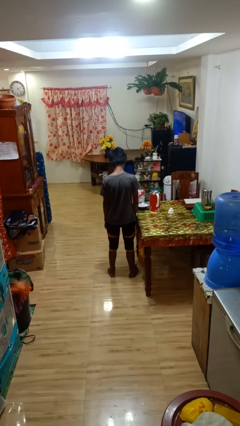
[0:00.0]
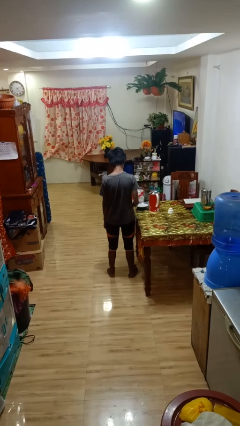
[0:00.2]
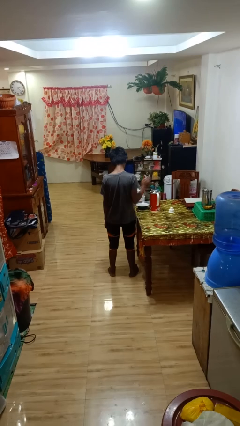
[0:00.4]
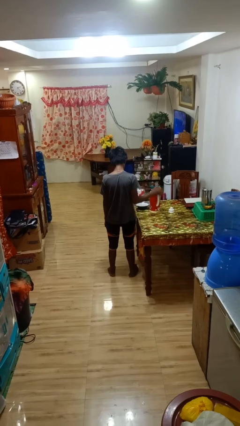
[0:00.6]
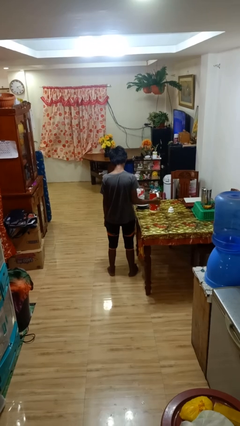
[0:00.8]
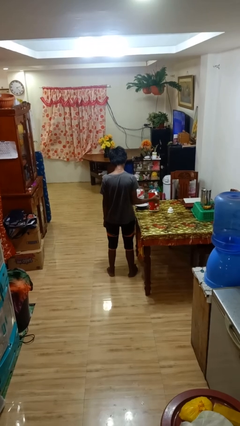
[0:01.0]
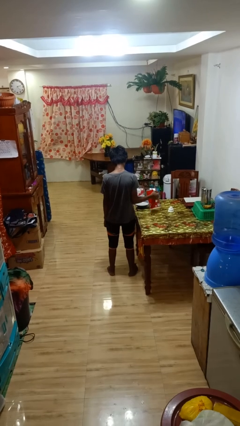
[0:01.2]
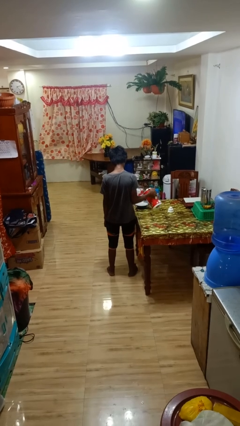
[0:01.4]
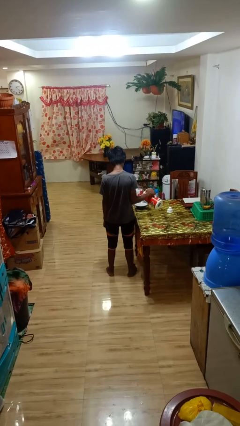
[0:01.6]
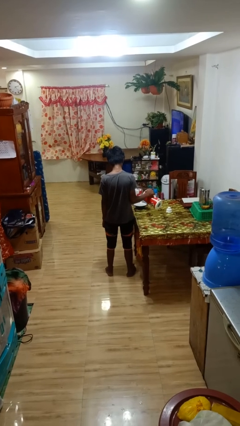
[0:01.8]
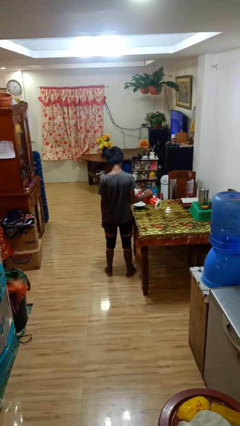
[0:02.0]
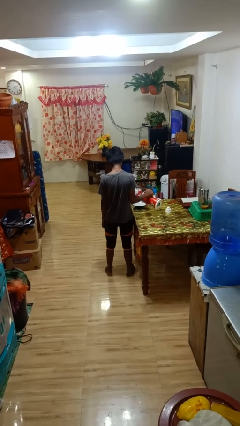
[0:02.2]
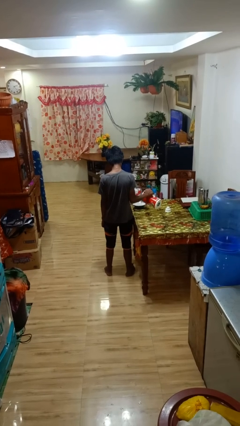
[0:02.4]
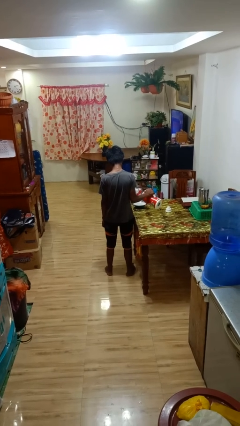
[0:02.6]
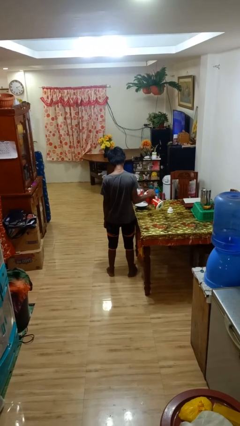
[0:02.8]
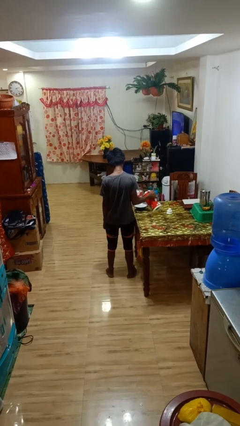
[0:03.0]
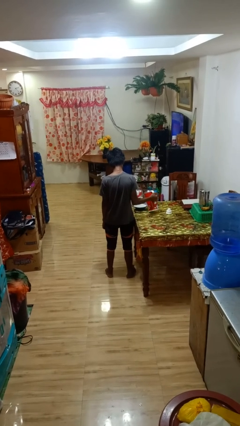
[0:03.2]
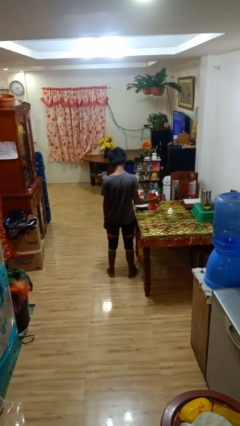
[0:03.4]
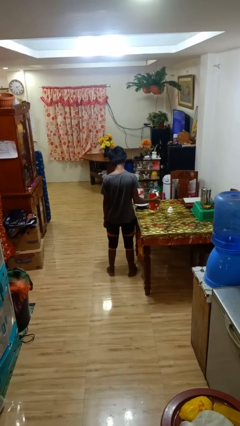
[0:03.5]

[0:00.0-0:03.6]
person pours into bowl

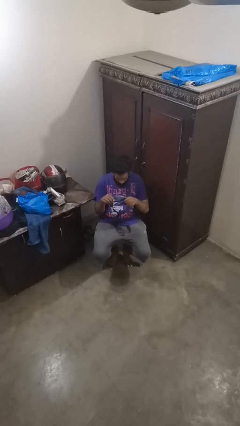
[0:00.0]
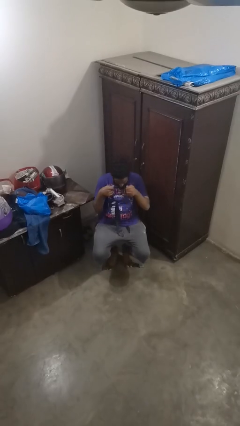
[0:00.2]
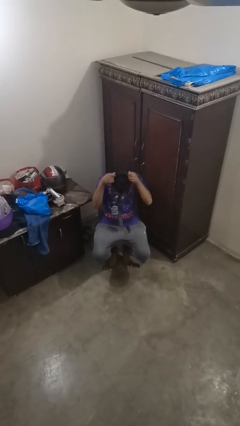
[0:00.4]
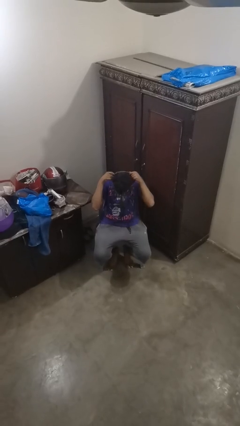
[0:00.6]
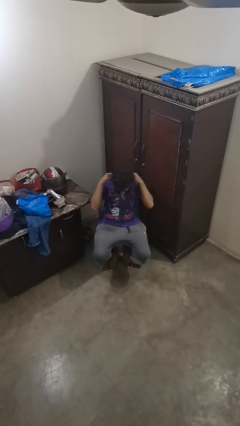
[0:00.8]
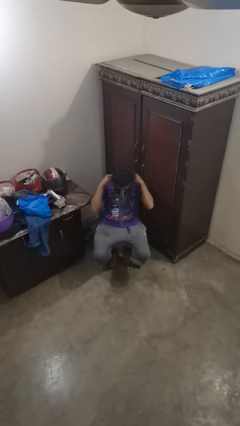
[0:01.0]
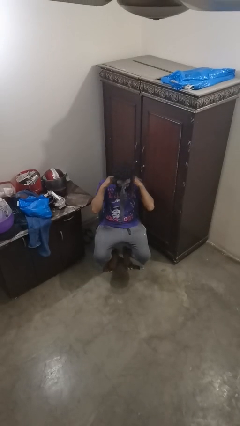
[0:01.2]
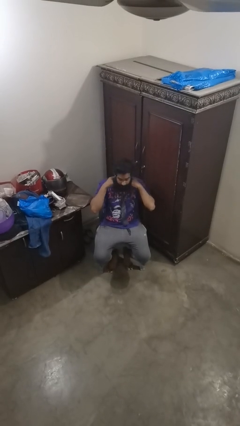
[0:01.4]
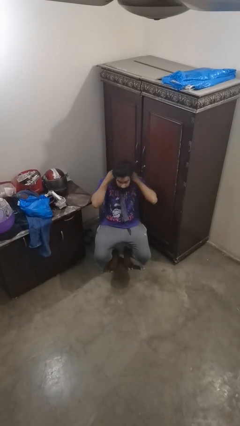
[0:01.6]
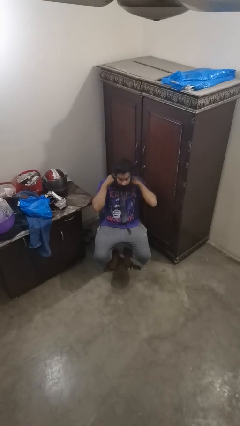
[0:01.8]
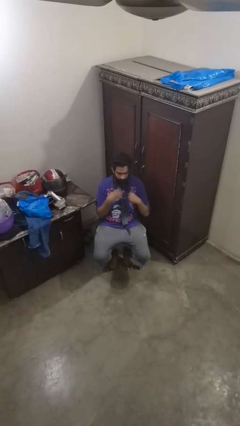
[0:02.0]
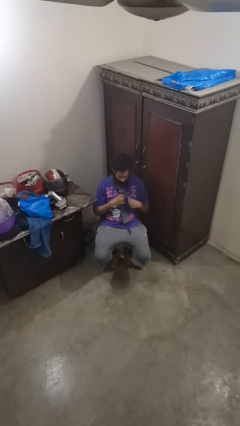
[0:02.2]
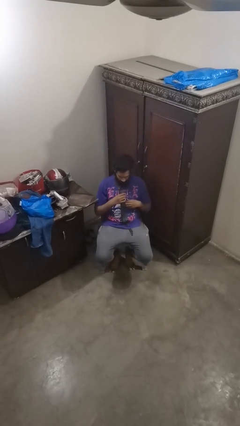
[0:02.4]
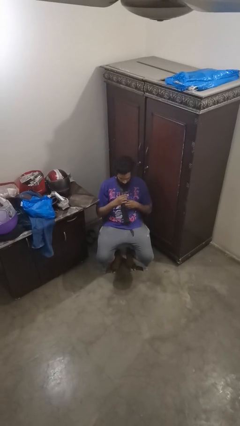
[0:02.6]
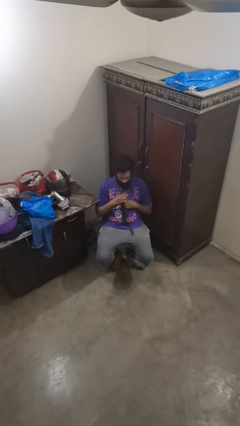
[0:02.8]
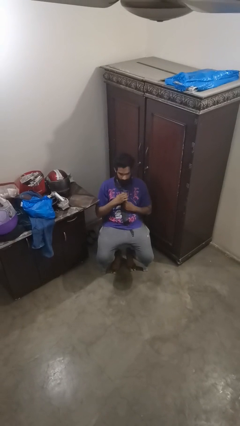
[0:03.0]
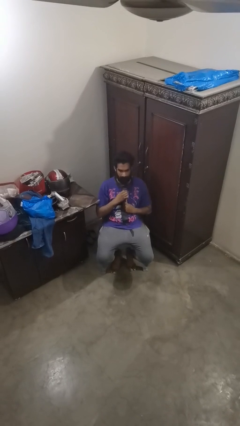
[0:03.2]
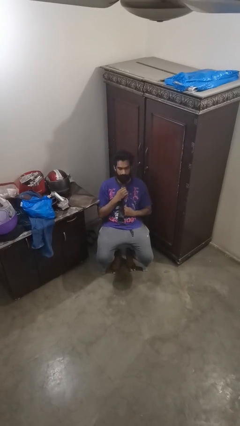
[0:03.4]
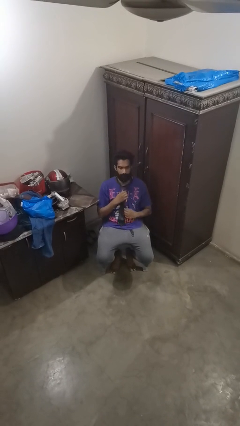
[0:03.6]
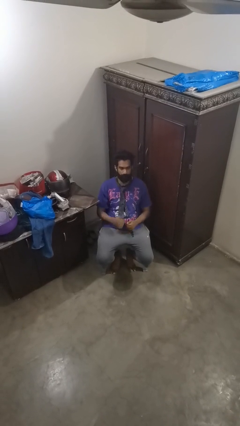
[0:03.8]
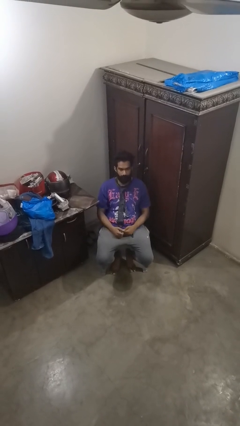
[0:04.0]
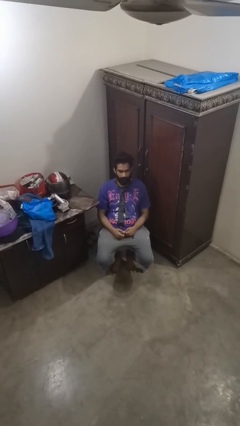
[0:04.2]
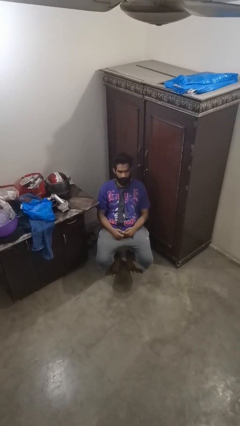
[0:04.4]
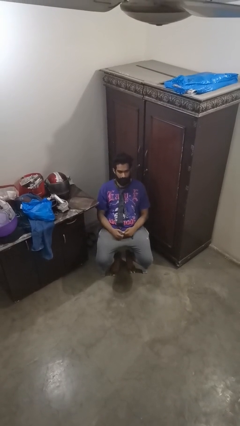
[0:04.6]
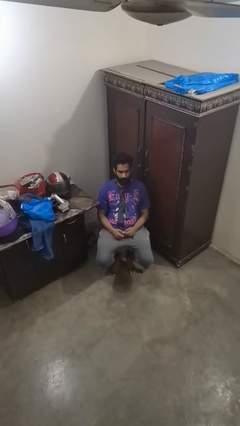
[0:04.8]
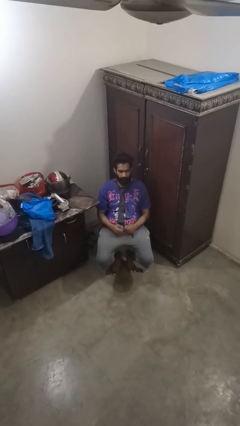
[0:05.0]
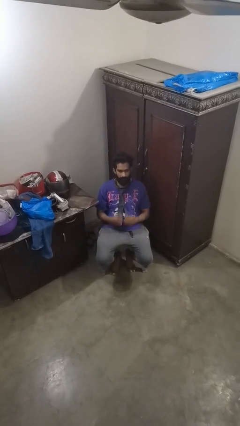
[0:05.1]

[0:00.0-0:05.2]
person puts on necktie

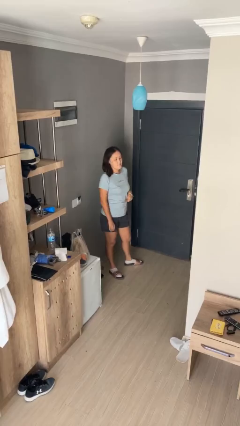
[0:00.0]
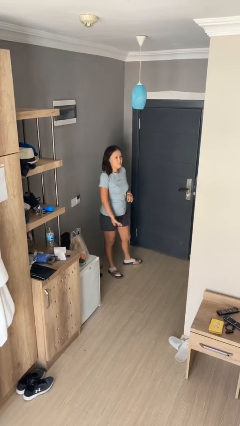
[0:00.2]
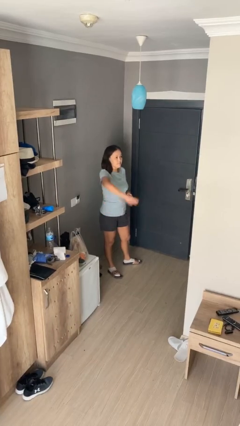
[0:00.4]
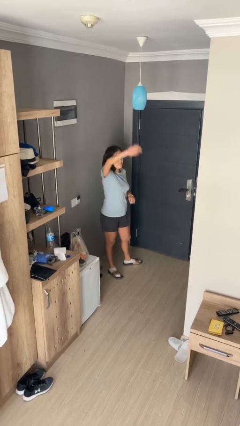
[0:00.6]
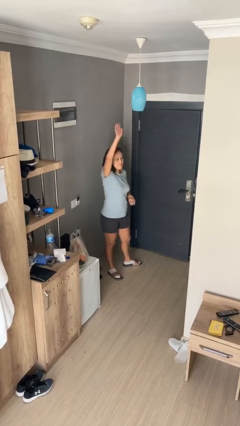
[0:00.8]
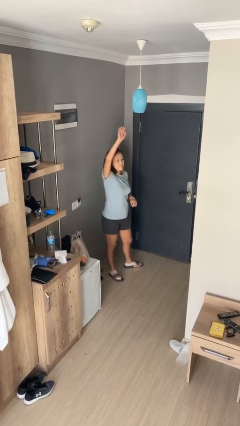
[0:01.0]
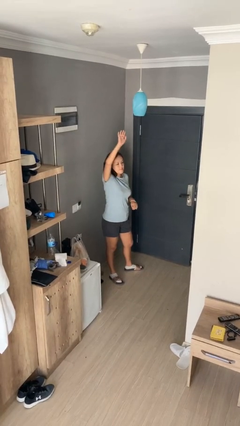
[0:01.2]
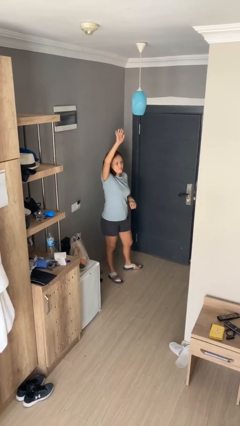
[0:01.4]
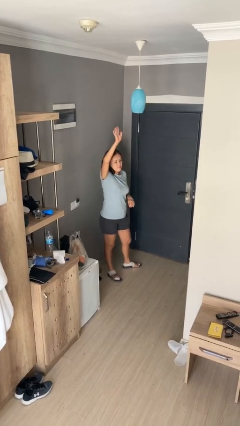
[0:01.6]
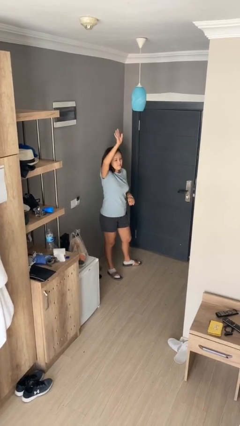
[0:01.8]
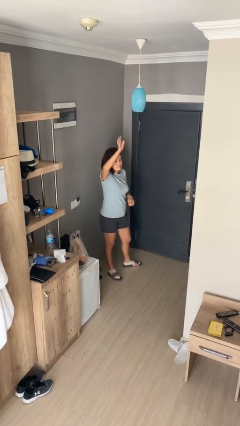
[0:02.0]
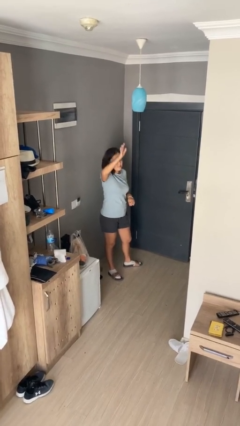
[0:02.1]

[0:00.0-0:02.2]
person gestures swipe up

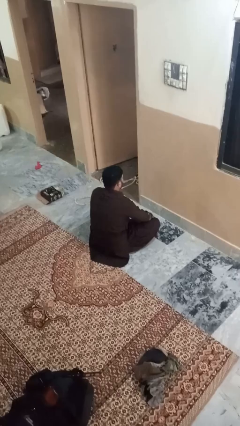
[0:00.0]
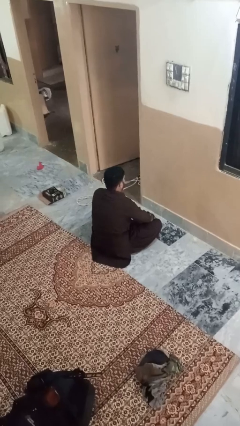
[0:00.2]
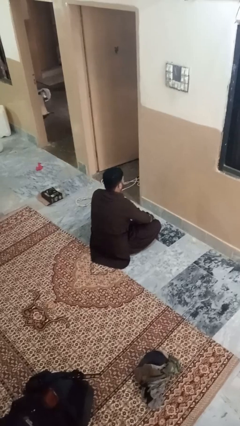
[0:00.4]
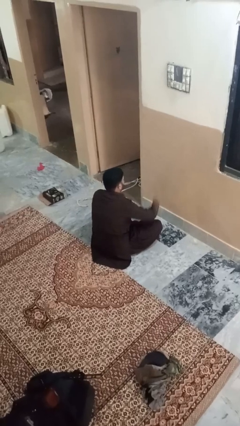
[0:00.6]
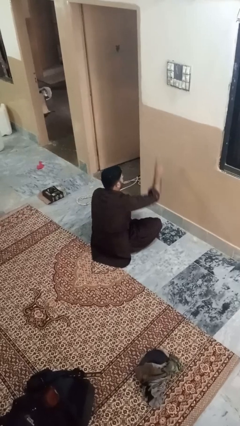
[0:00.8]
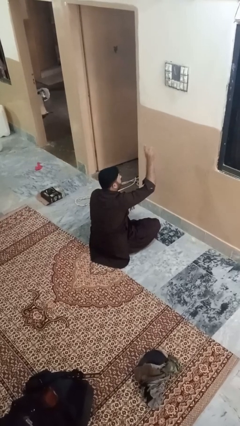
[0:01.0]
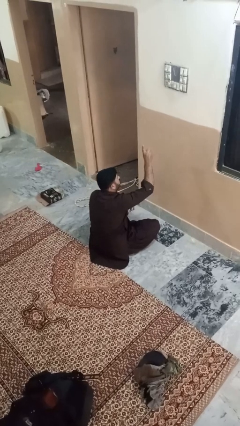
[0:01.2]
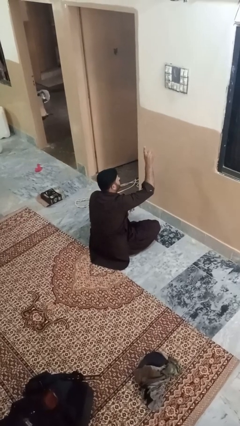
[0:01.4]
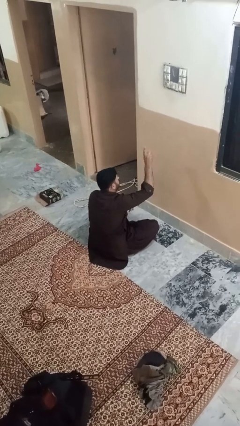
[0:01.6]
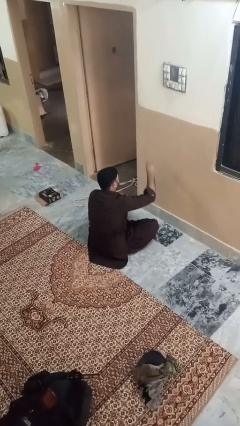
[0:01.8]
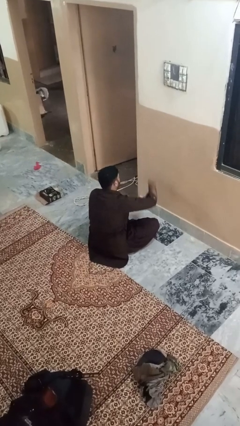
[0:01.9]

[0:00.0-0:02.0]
person gestures number one

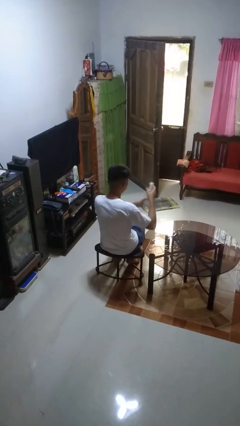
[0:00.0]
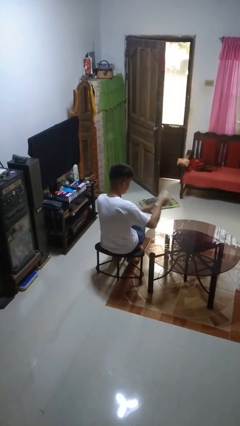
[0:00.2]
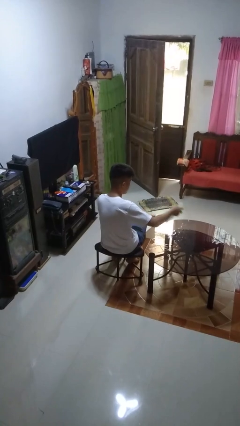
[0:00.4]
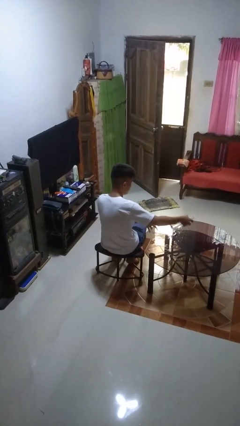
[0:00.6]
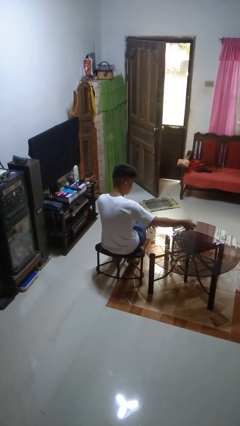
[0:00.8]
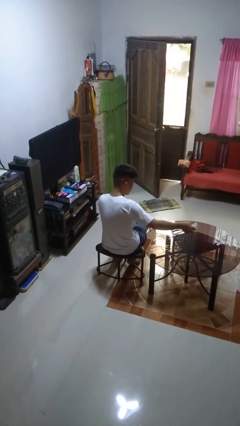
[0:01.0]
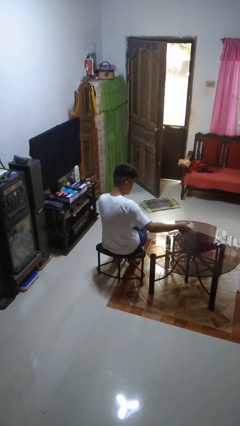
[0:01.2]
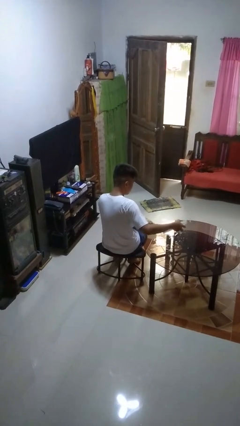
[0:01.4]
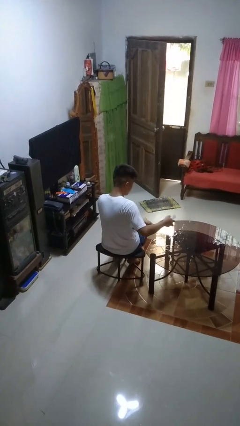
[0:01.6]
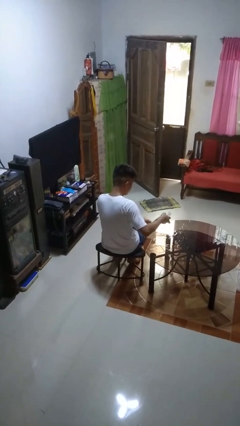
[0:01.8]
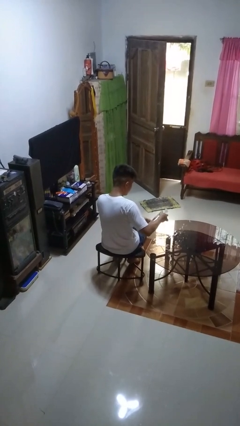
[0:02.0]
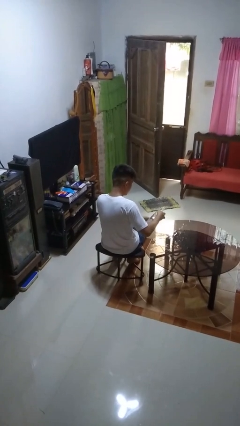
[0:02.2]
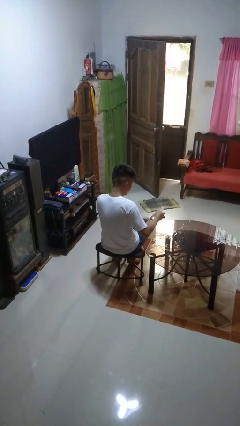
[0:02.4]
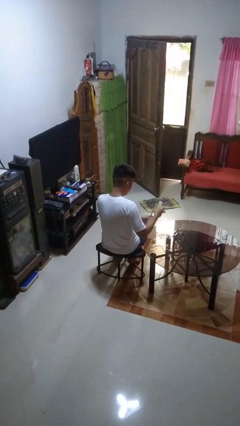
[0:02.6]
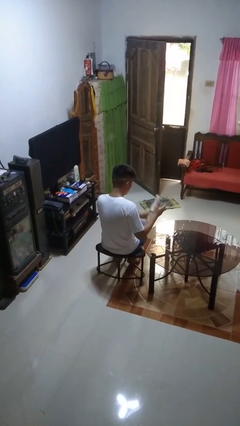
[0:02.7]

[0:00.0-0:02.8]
person sprays from bottle

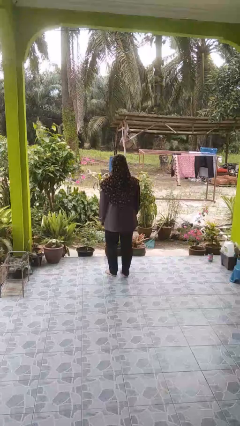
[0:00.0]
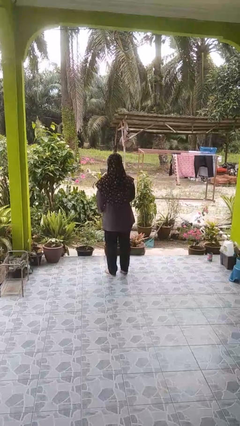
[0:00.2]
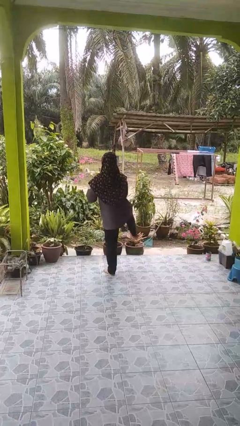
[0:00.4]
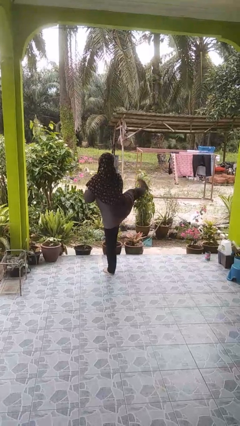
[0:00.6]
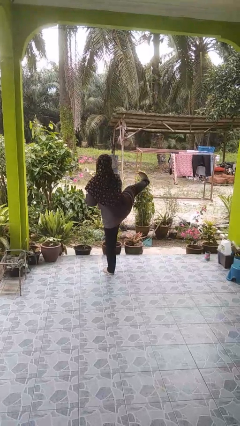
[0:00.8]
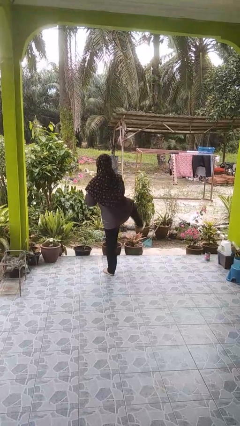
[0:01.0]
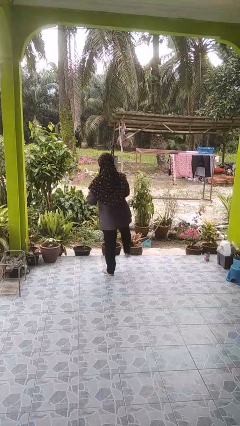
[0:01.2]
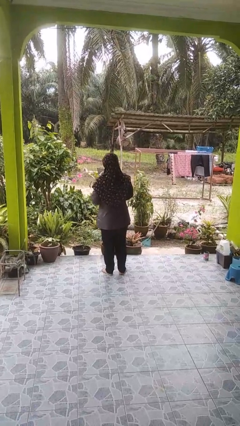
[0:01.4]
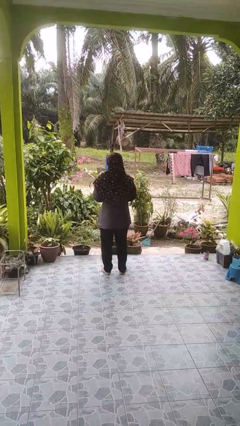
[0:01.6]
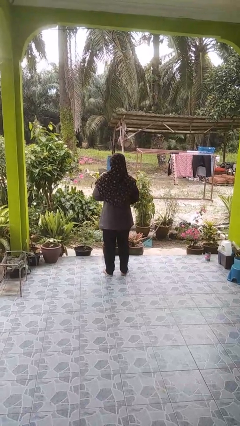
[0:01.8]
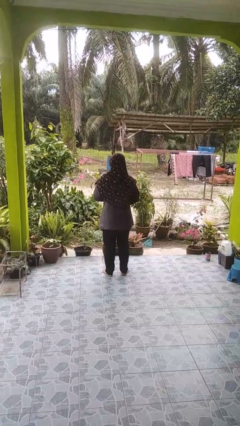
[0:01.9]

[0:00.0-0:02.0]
person karate kicks
